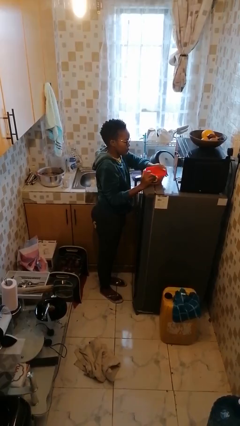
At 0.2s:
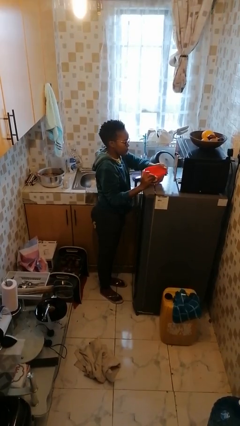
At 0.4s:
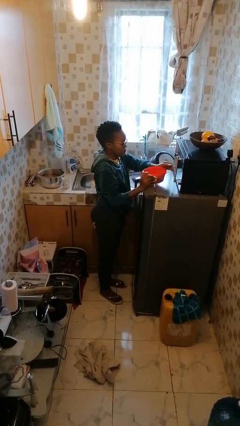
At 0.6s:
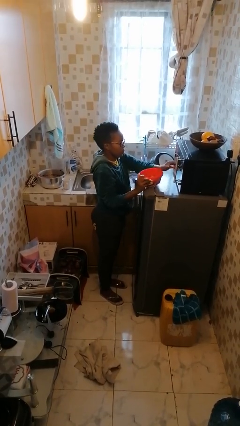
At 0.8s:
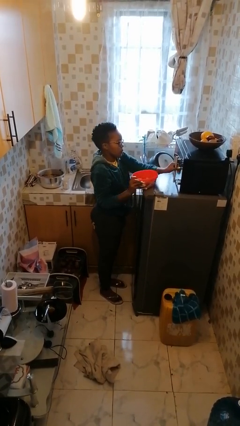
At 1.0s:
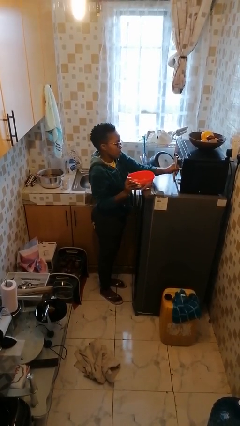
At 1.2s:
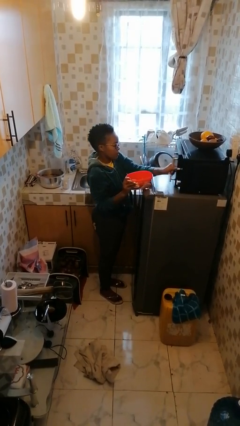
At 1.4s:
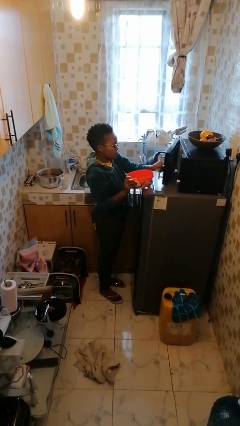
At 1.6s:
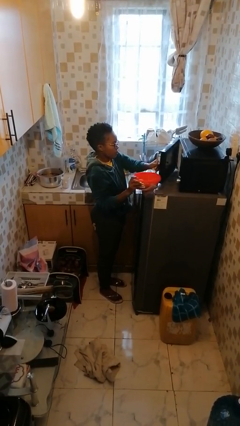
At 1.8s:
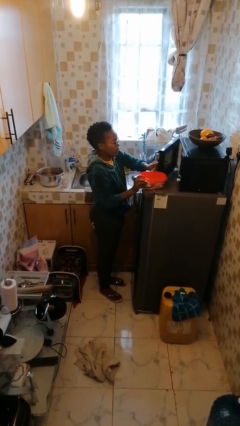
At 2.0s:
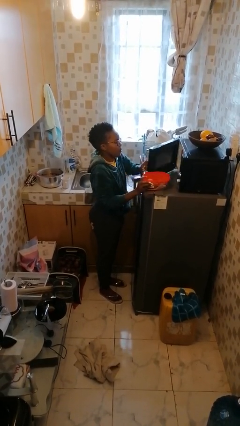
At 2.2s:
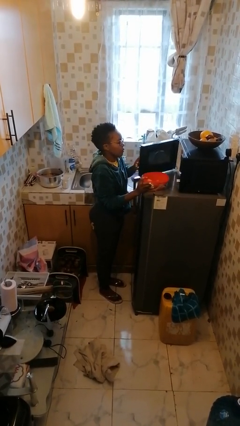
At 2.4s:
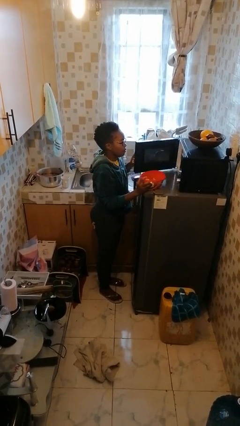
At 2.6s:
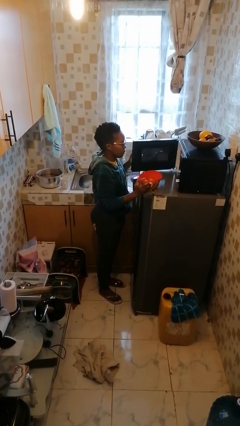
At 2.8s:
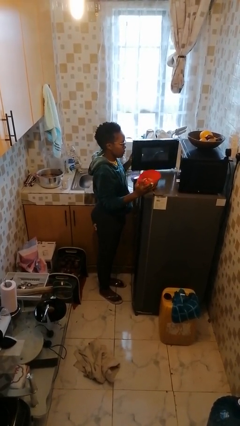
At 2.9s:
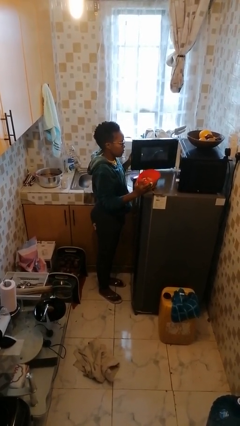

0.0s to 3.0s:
person opens microwave

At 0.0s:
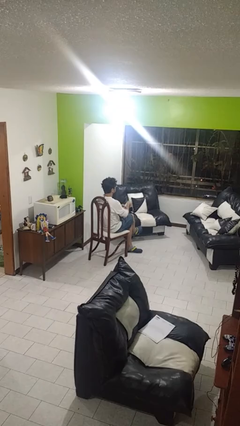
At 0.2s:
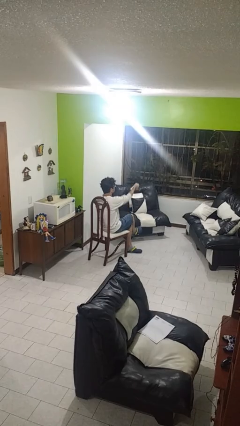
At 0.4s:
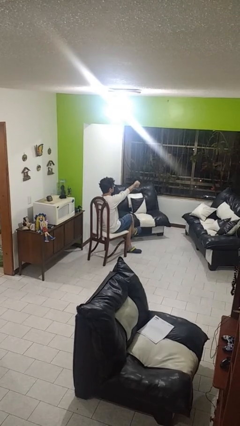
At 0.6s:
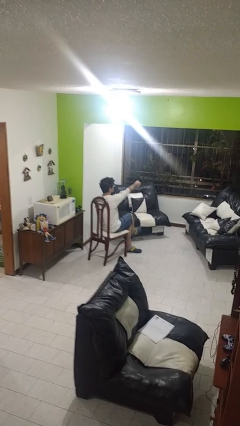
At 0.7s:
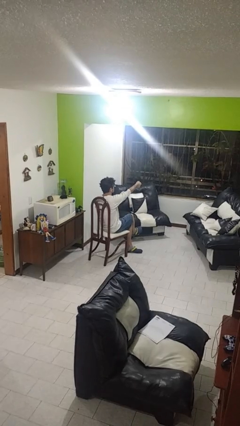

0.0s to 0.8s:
person uses television remote

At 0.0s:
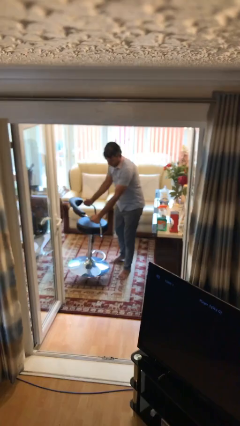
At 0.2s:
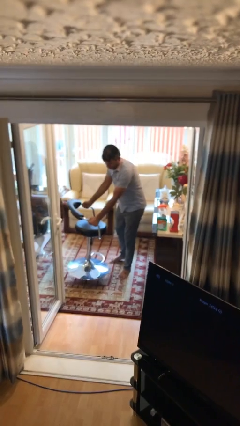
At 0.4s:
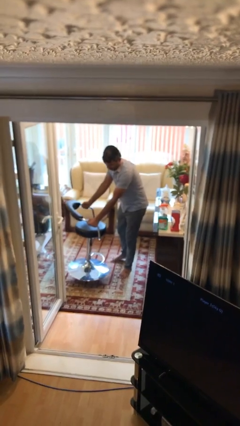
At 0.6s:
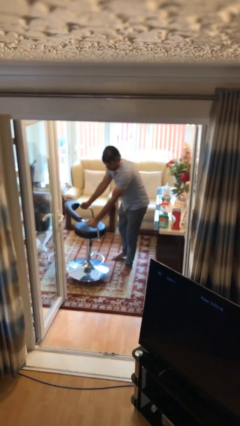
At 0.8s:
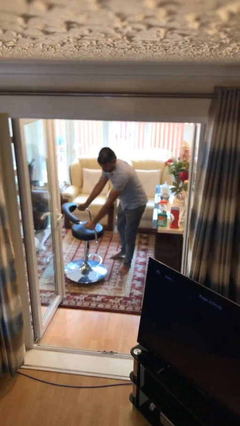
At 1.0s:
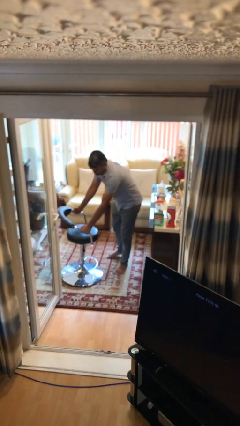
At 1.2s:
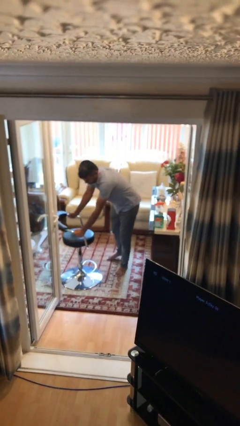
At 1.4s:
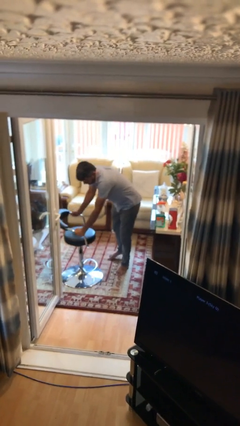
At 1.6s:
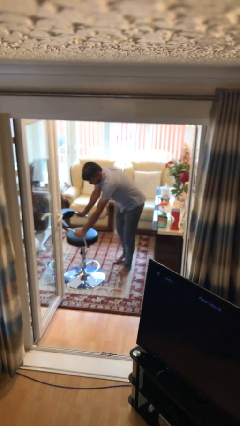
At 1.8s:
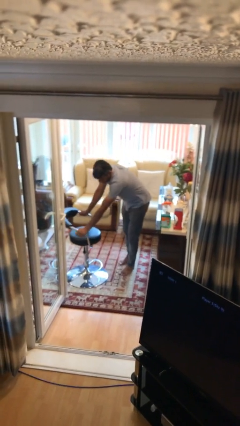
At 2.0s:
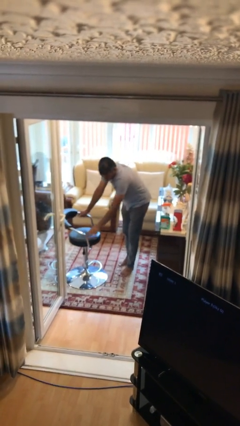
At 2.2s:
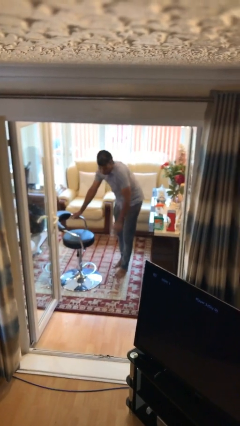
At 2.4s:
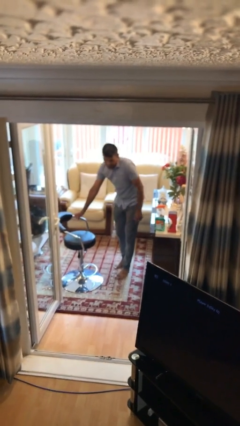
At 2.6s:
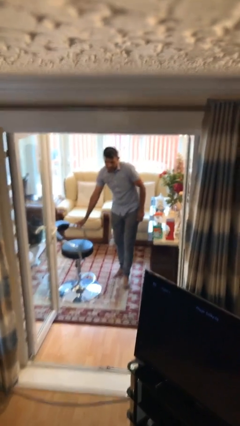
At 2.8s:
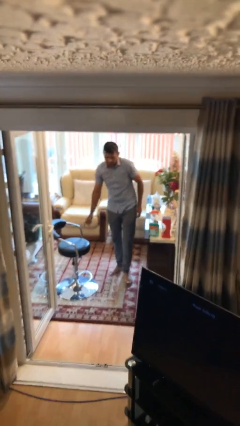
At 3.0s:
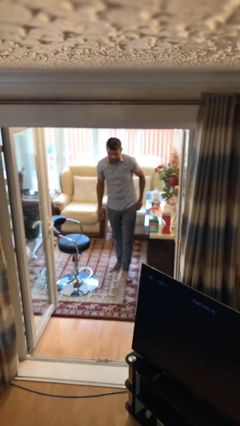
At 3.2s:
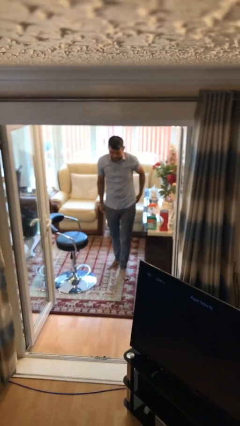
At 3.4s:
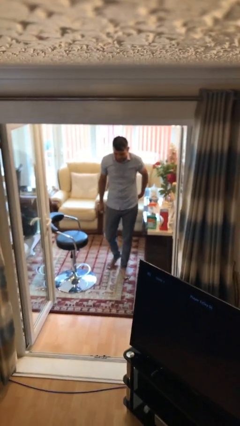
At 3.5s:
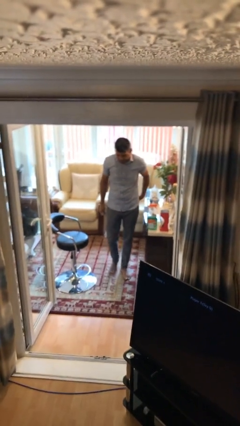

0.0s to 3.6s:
person puts down object on floor

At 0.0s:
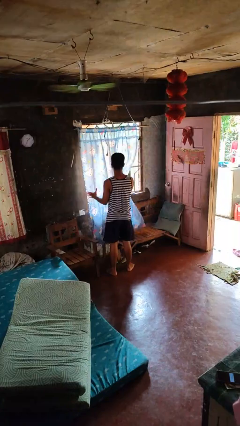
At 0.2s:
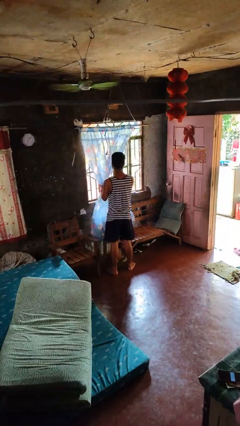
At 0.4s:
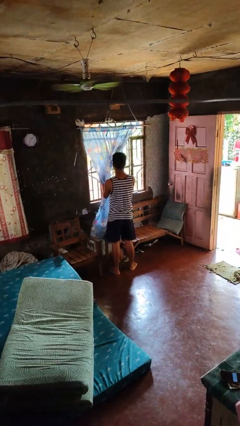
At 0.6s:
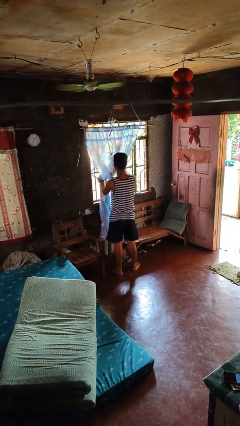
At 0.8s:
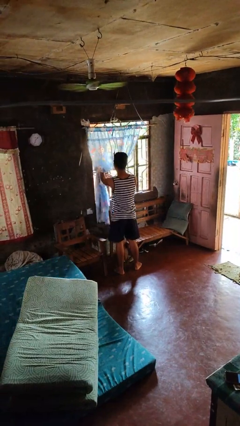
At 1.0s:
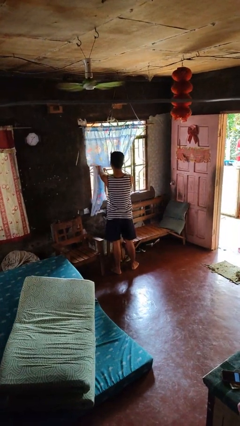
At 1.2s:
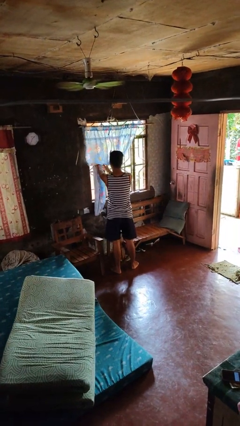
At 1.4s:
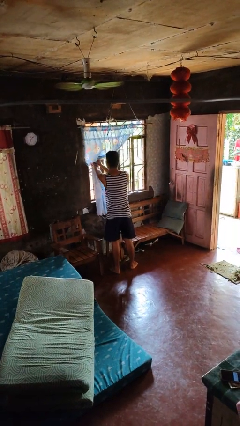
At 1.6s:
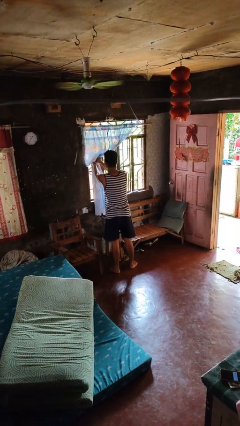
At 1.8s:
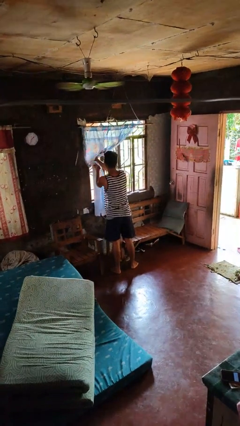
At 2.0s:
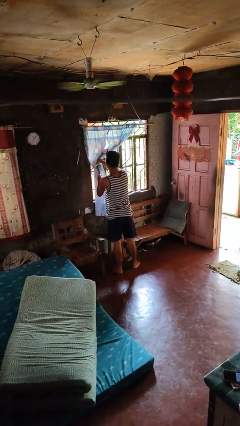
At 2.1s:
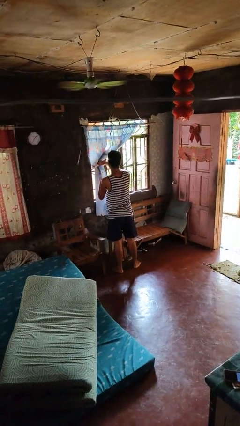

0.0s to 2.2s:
person opens curtains

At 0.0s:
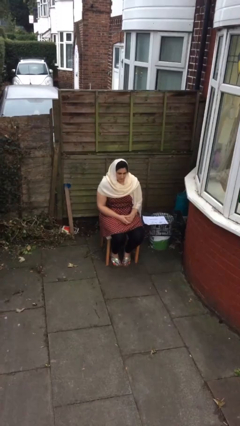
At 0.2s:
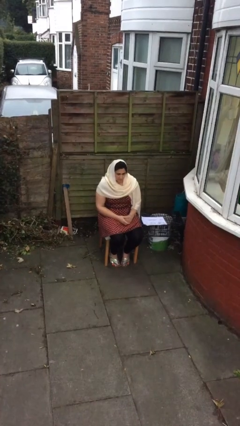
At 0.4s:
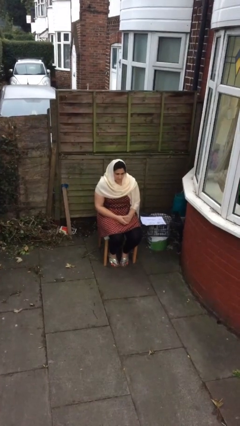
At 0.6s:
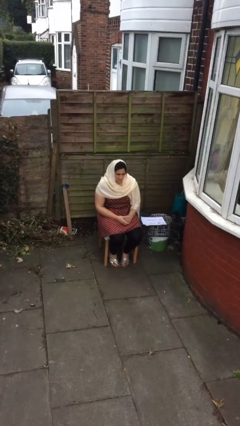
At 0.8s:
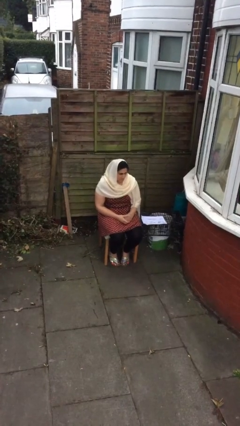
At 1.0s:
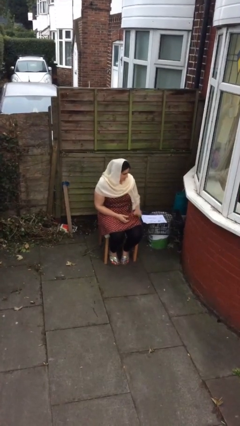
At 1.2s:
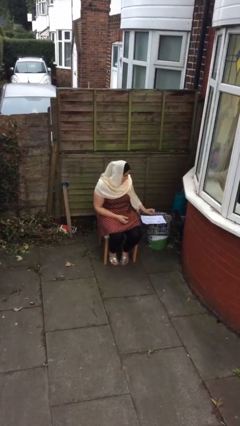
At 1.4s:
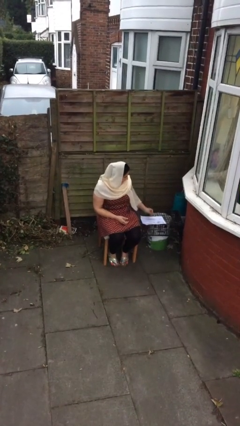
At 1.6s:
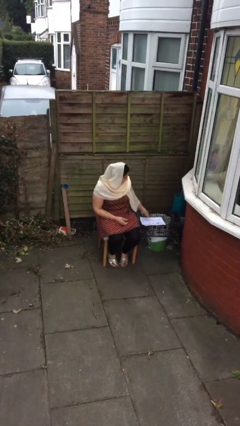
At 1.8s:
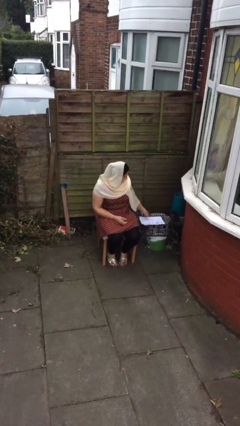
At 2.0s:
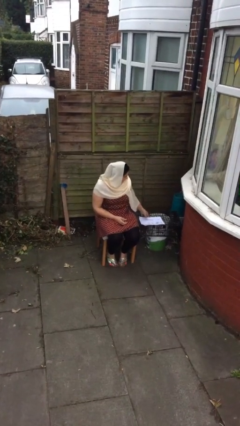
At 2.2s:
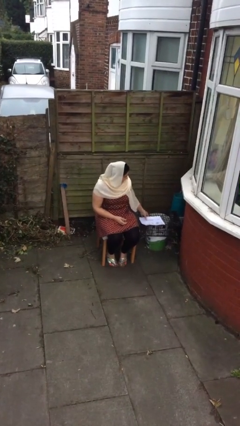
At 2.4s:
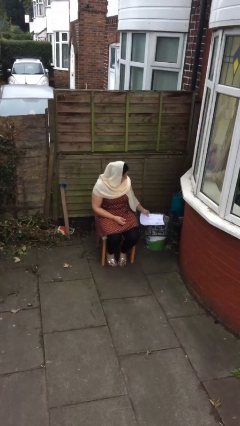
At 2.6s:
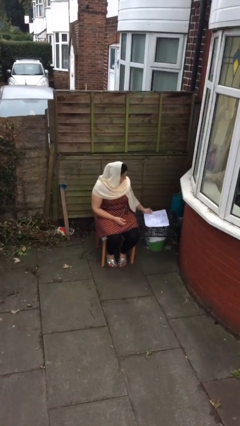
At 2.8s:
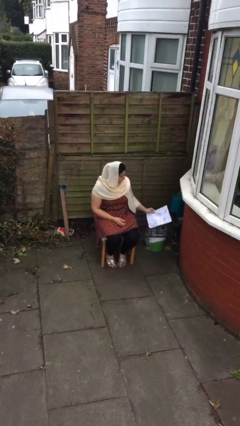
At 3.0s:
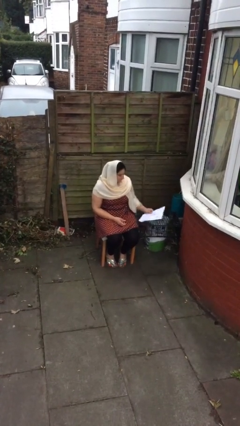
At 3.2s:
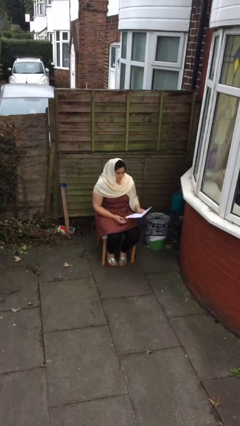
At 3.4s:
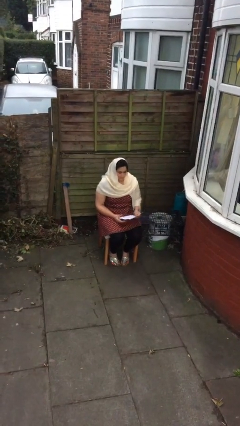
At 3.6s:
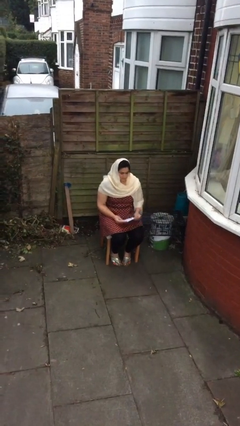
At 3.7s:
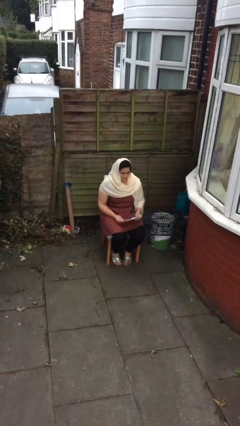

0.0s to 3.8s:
person picks up object from table

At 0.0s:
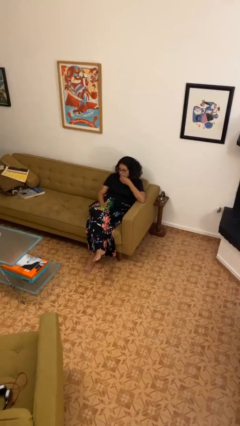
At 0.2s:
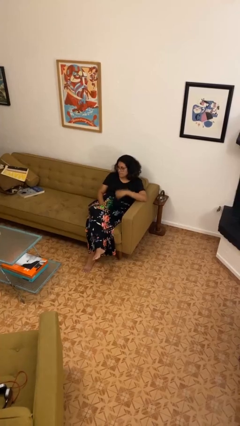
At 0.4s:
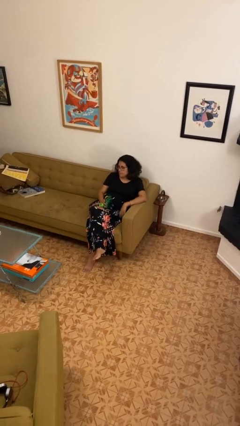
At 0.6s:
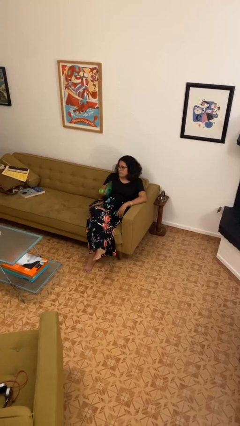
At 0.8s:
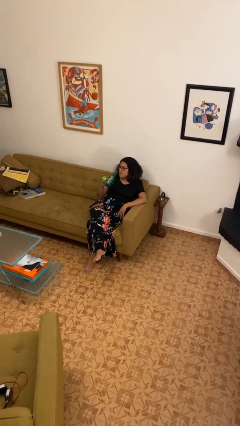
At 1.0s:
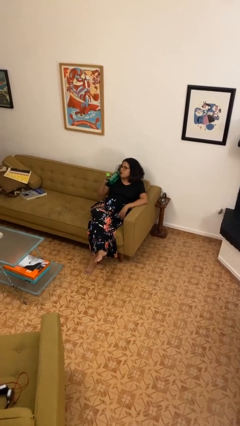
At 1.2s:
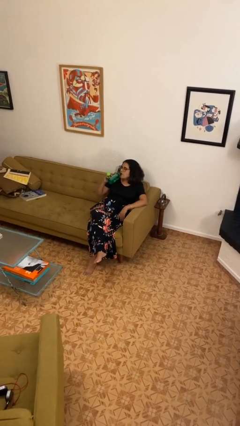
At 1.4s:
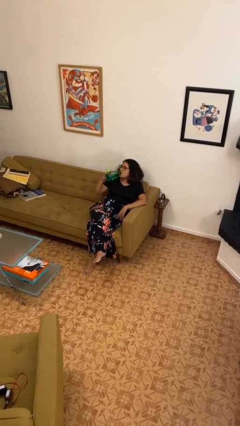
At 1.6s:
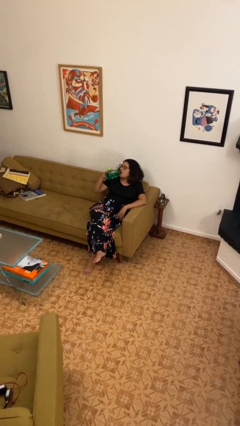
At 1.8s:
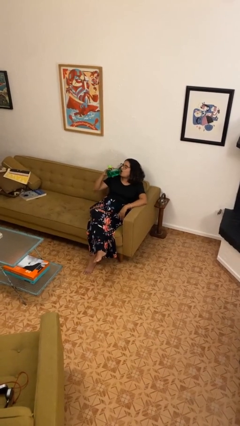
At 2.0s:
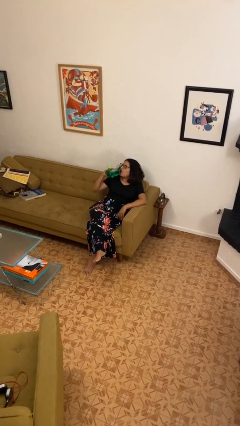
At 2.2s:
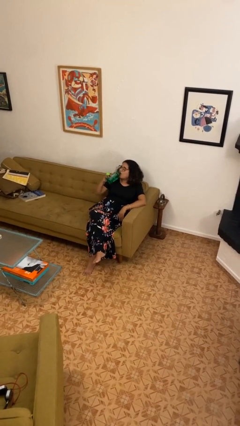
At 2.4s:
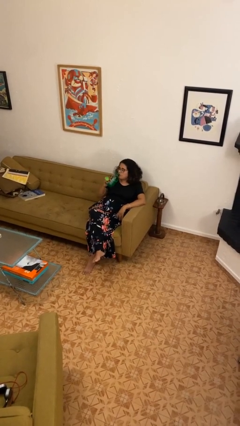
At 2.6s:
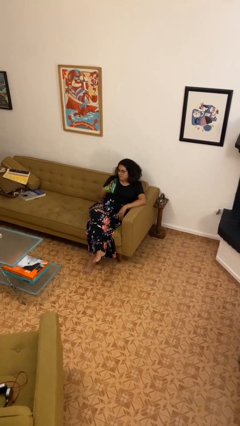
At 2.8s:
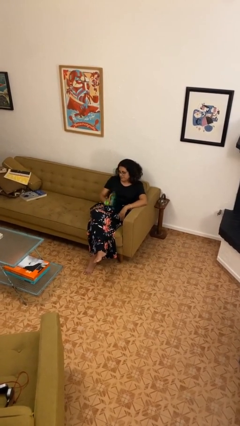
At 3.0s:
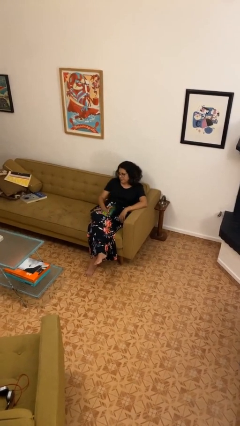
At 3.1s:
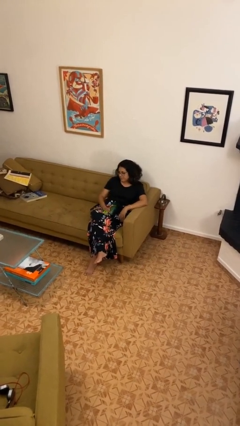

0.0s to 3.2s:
person drinks from bottle

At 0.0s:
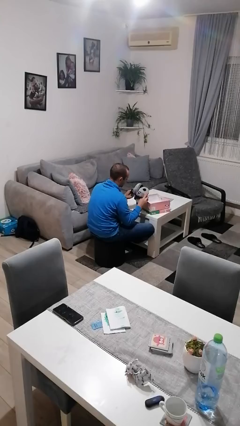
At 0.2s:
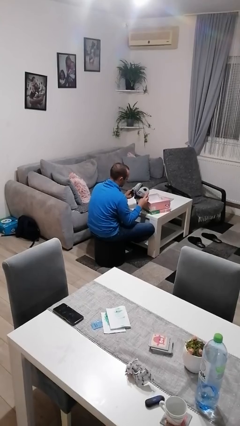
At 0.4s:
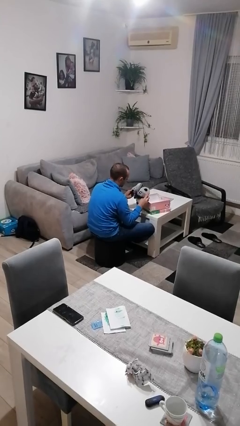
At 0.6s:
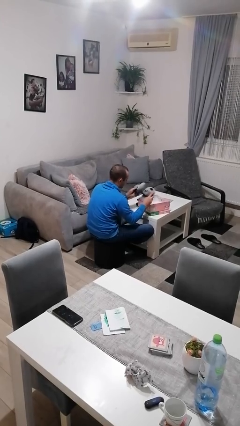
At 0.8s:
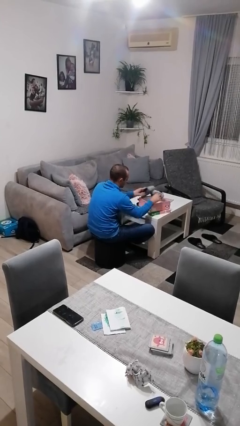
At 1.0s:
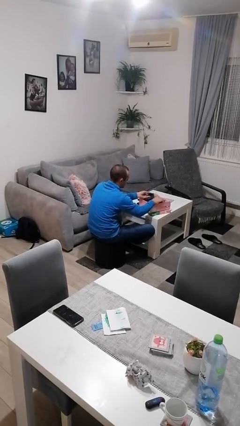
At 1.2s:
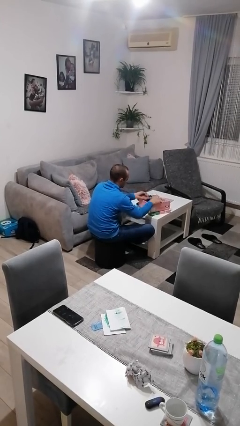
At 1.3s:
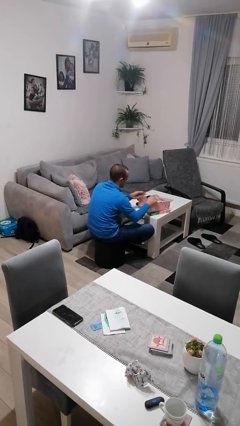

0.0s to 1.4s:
person puts object into box
